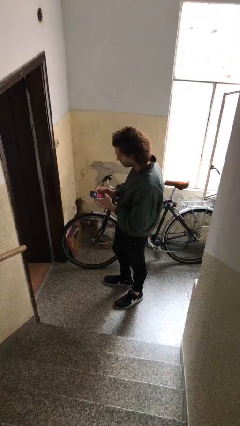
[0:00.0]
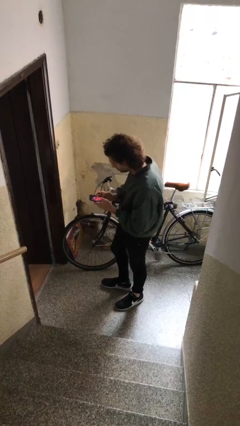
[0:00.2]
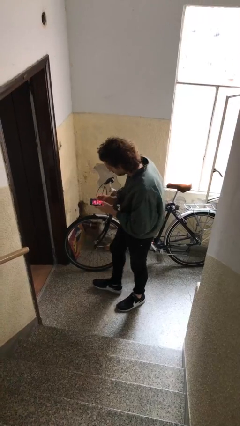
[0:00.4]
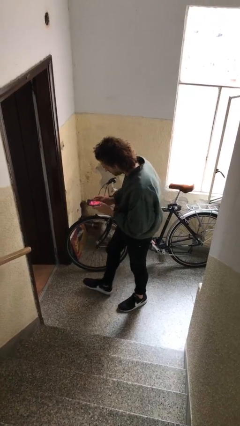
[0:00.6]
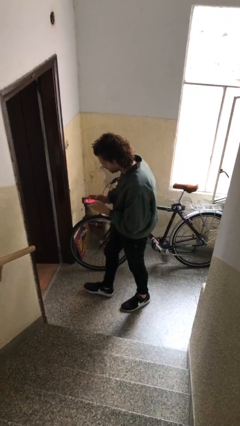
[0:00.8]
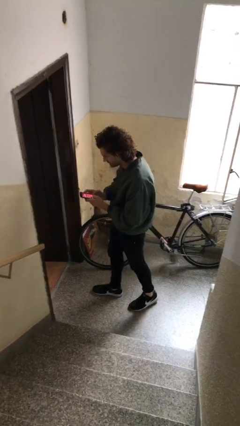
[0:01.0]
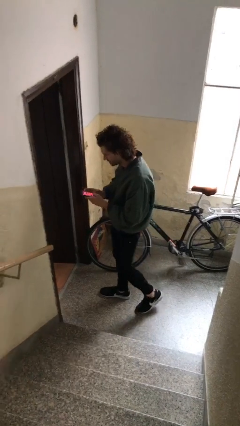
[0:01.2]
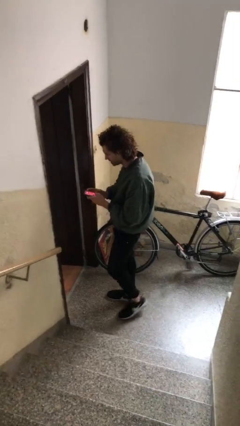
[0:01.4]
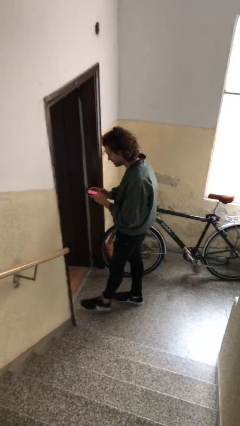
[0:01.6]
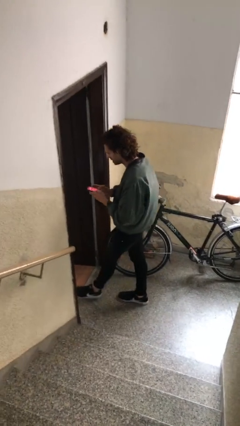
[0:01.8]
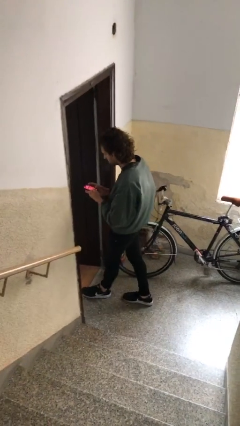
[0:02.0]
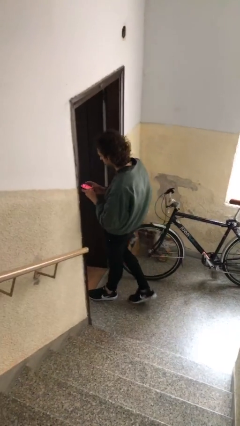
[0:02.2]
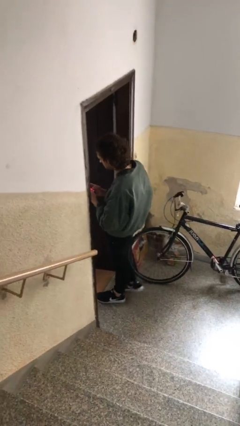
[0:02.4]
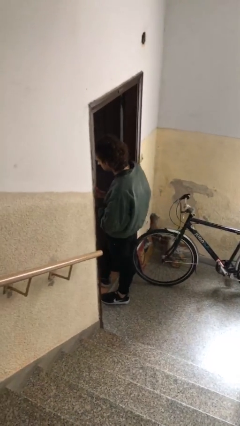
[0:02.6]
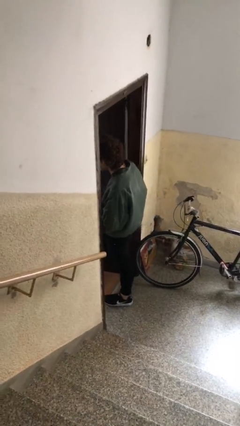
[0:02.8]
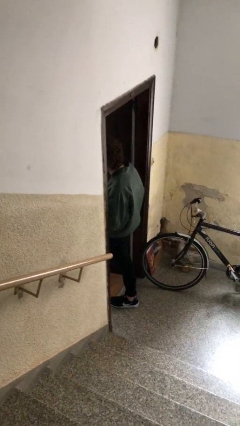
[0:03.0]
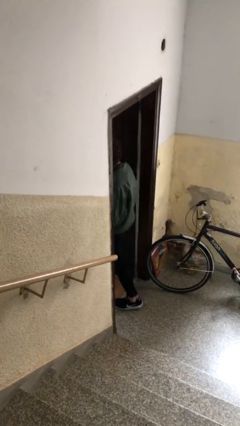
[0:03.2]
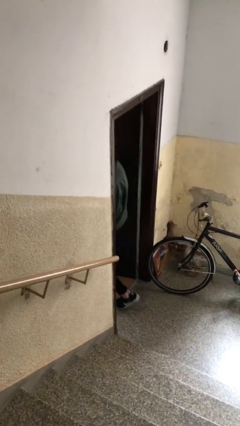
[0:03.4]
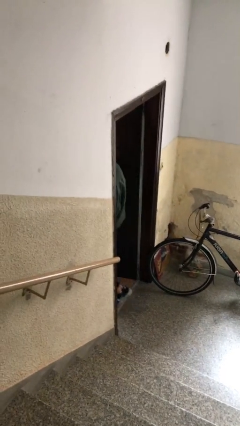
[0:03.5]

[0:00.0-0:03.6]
person texts on phone

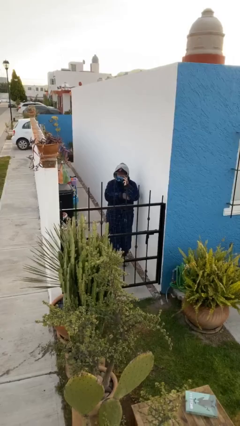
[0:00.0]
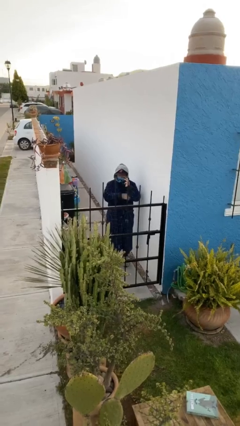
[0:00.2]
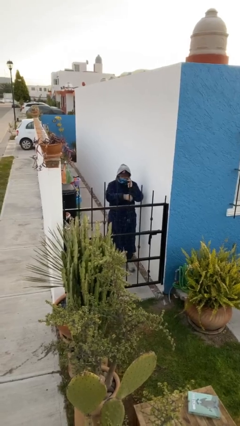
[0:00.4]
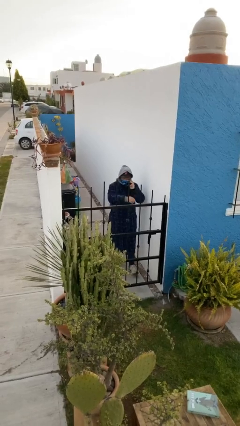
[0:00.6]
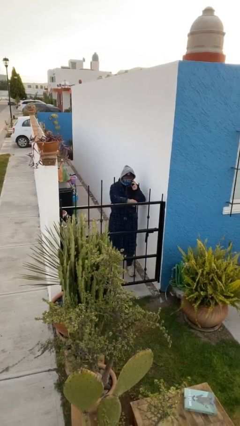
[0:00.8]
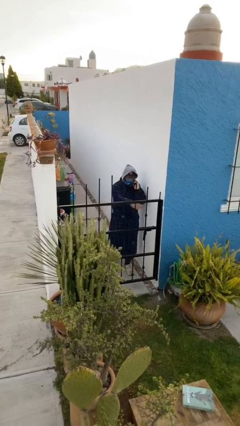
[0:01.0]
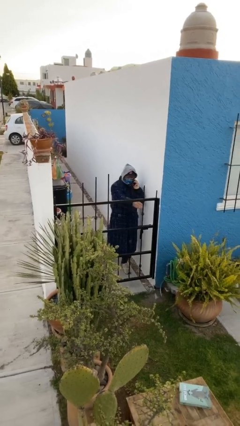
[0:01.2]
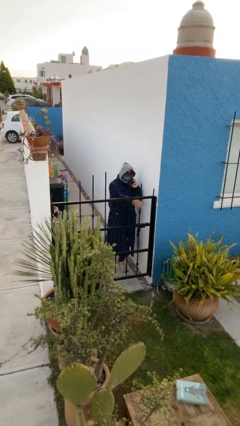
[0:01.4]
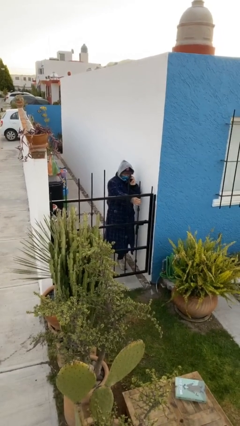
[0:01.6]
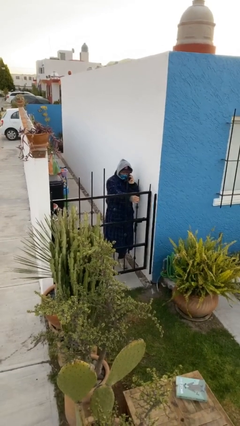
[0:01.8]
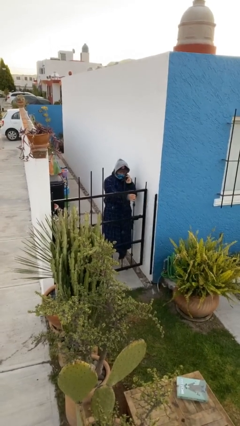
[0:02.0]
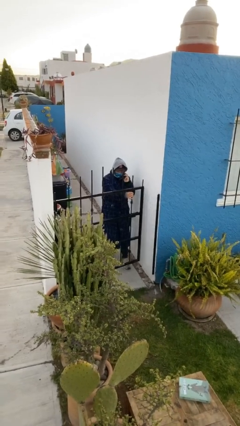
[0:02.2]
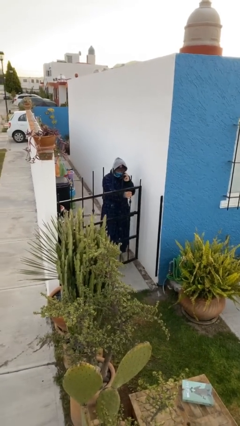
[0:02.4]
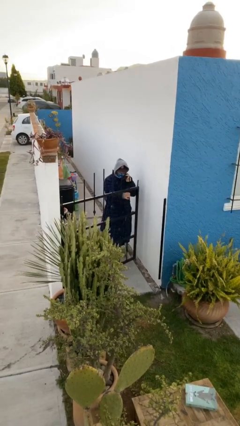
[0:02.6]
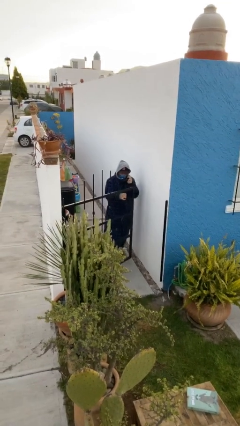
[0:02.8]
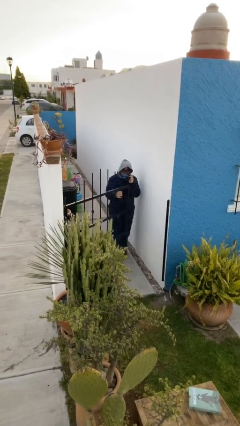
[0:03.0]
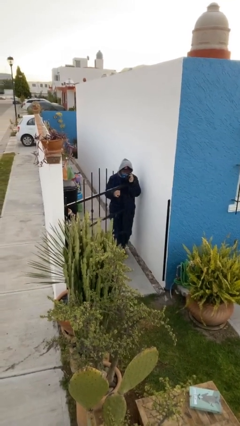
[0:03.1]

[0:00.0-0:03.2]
person opens facility door

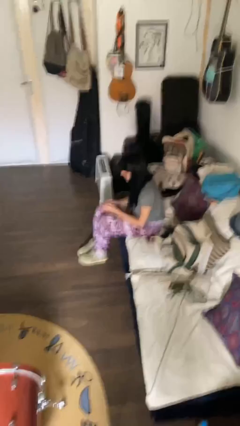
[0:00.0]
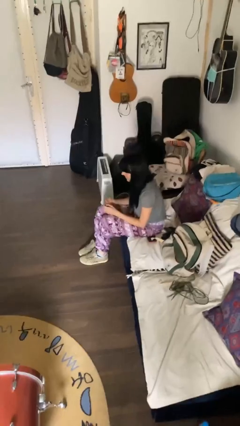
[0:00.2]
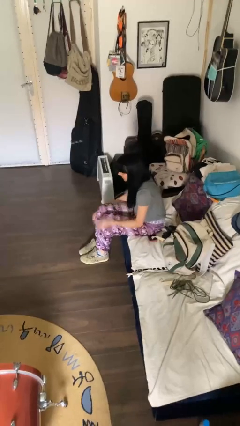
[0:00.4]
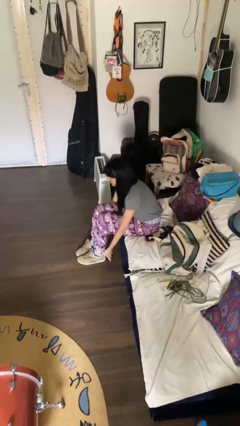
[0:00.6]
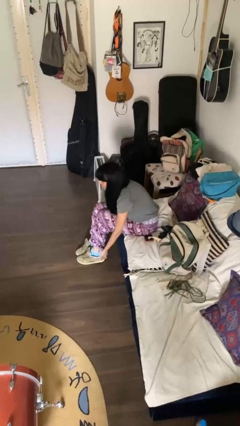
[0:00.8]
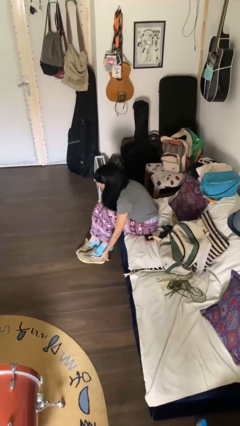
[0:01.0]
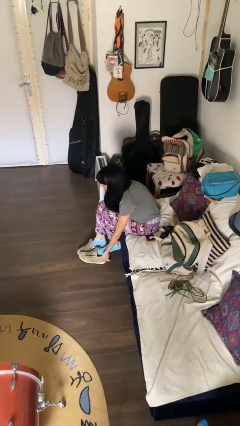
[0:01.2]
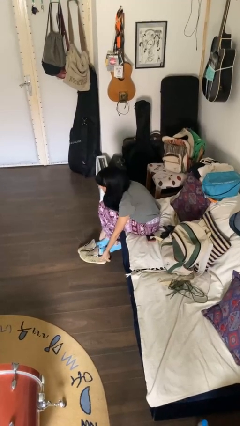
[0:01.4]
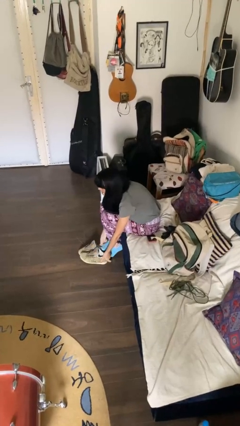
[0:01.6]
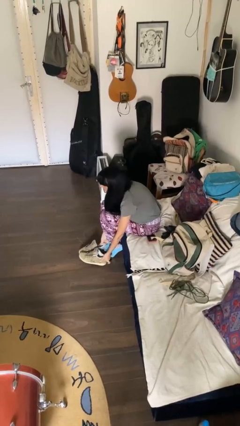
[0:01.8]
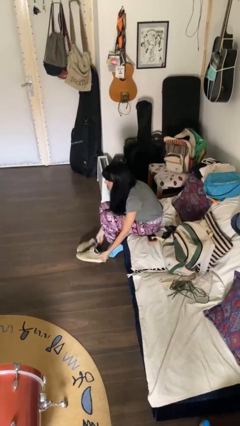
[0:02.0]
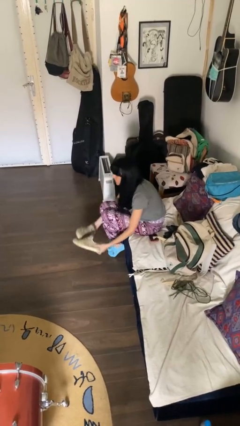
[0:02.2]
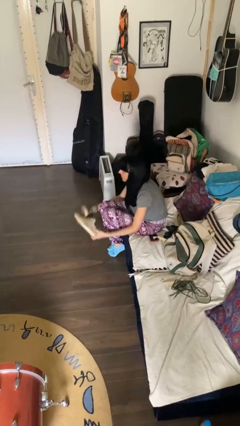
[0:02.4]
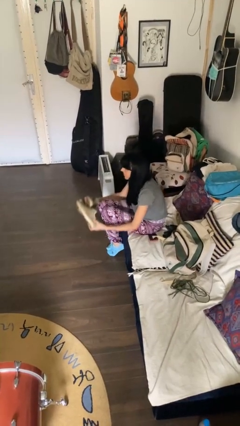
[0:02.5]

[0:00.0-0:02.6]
person takes off shoes

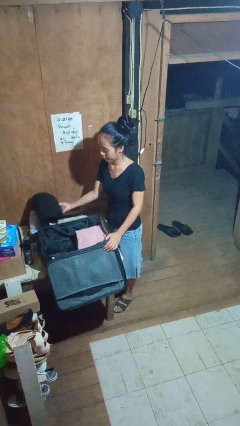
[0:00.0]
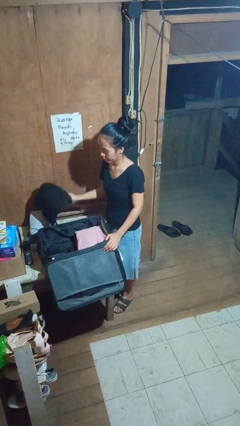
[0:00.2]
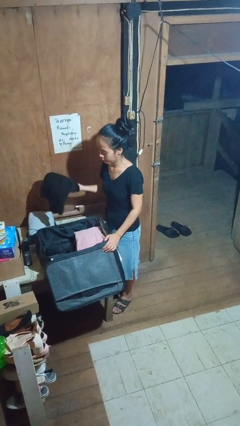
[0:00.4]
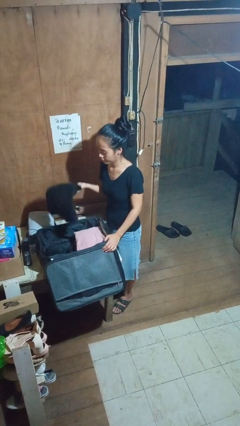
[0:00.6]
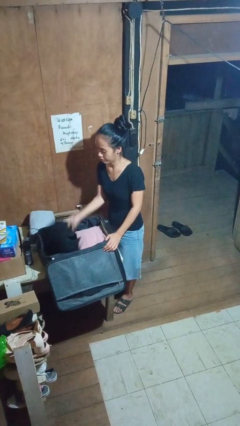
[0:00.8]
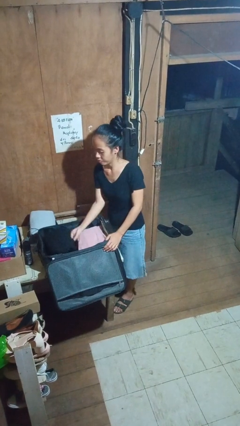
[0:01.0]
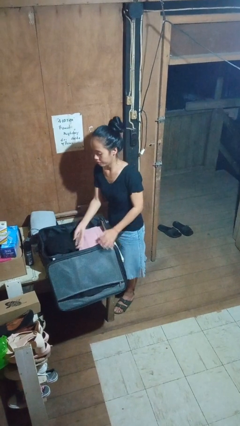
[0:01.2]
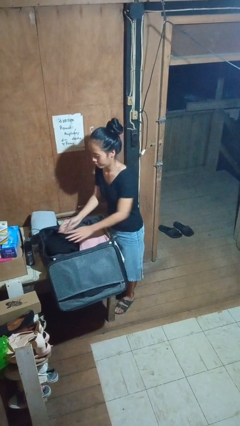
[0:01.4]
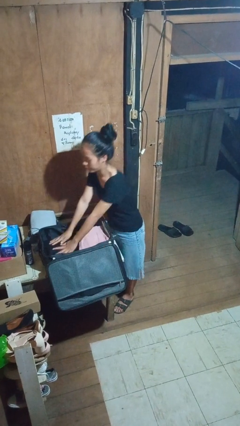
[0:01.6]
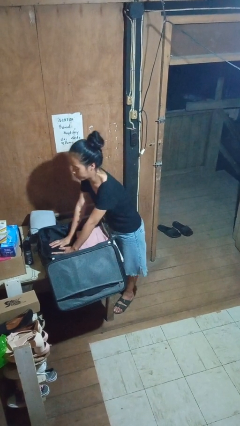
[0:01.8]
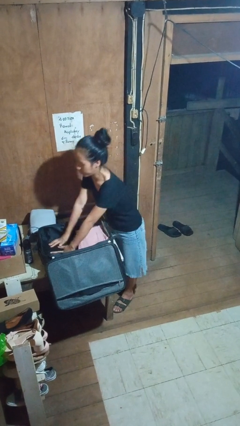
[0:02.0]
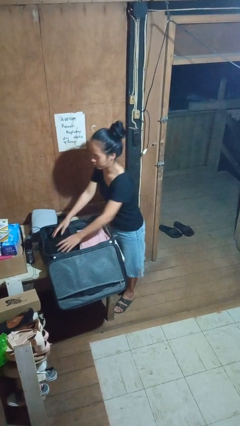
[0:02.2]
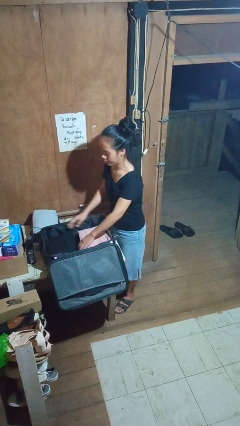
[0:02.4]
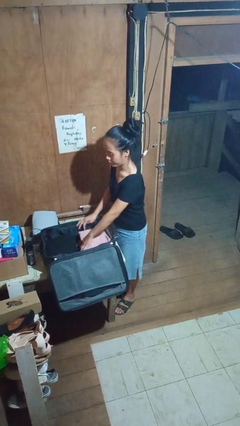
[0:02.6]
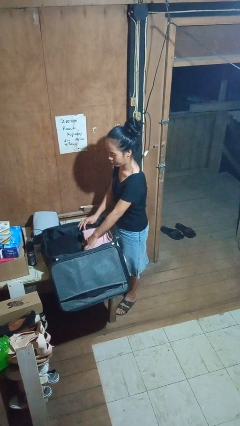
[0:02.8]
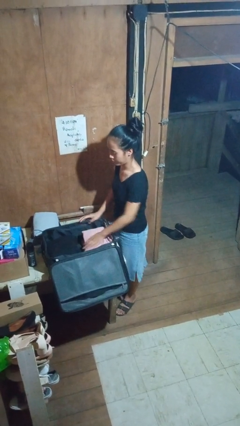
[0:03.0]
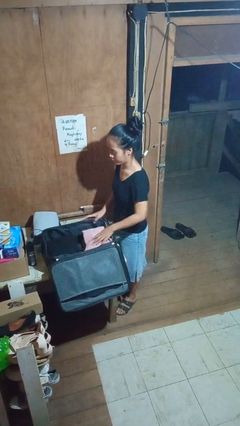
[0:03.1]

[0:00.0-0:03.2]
person loads clothes into suitcase

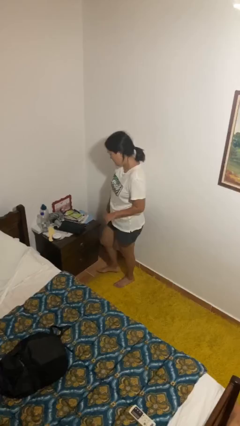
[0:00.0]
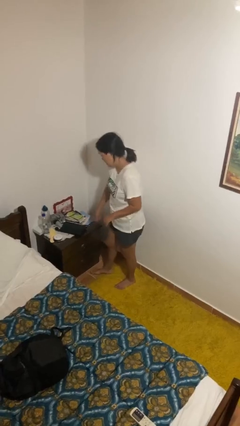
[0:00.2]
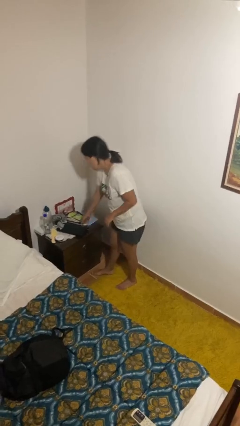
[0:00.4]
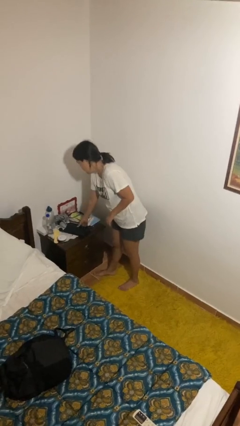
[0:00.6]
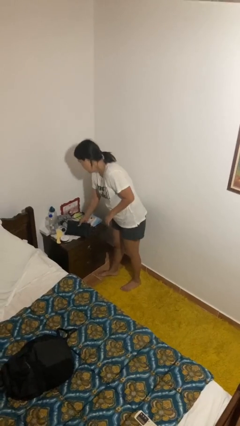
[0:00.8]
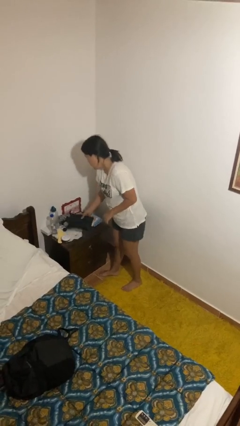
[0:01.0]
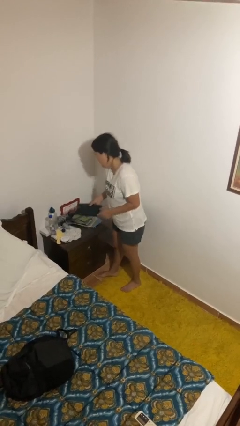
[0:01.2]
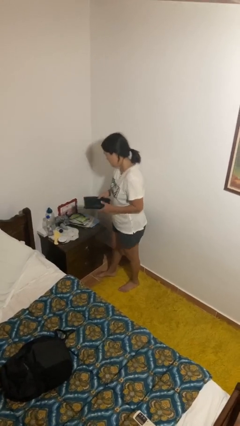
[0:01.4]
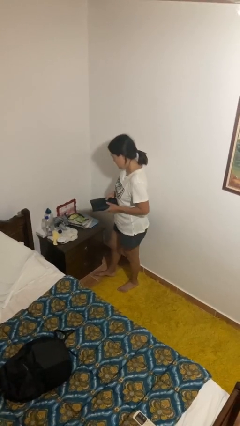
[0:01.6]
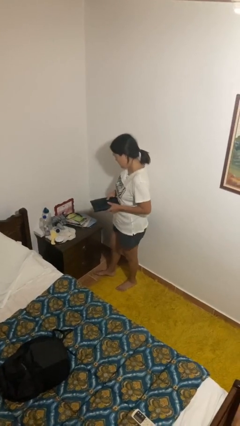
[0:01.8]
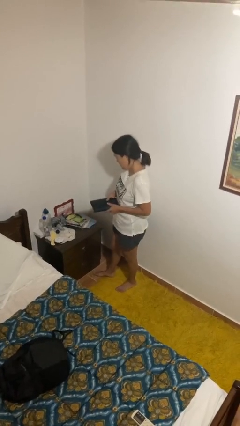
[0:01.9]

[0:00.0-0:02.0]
person picks up object from countertop

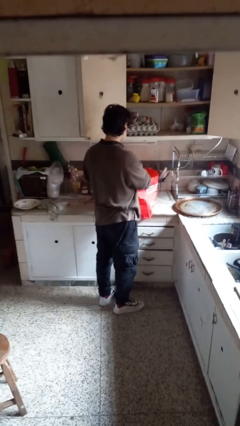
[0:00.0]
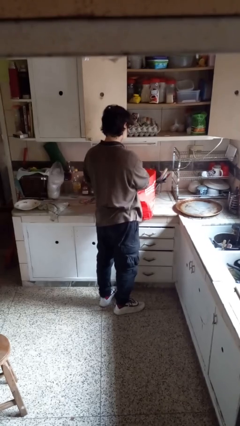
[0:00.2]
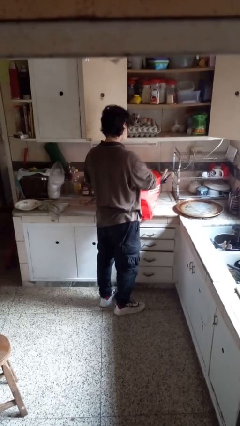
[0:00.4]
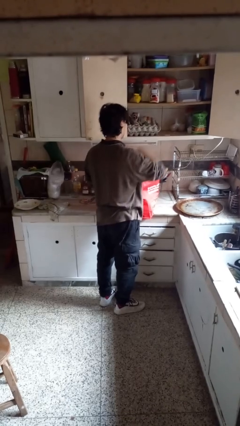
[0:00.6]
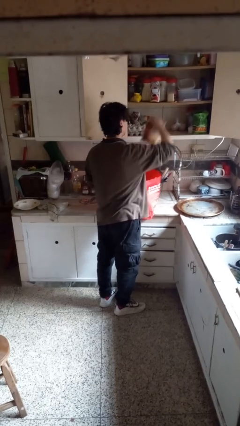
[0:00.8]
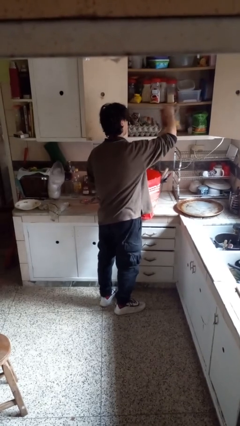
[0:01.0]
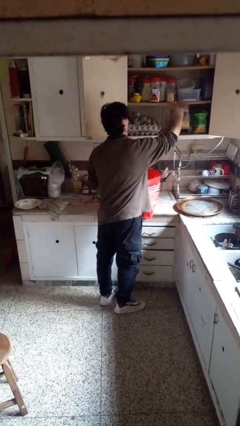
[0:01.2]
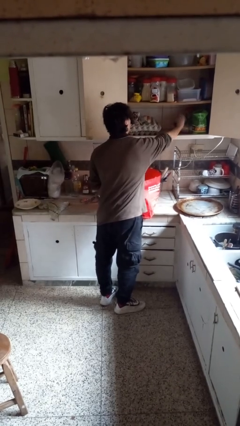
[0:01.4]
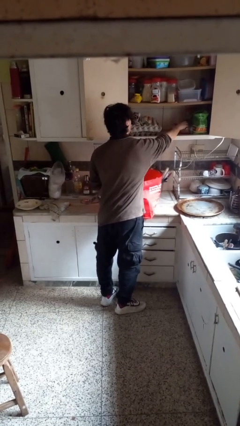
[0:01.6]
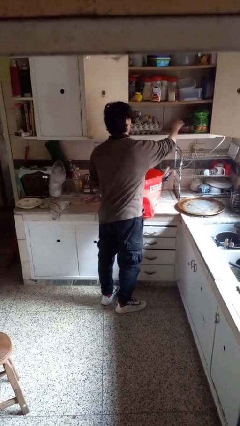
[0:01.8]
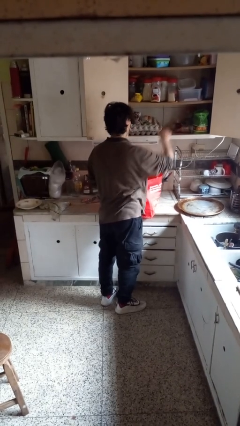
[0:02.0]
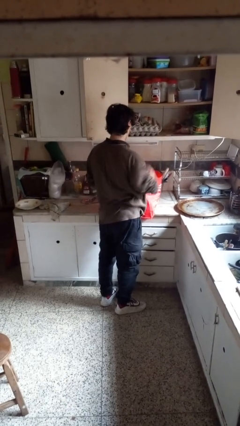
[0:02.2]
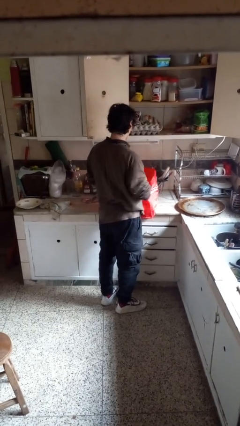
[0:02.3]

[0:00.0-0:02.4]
person loads groceries into cabinet

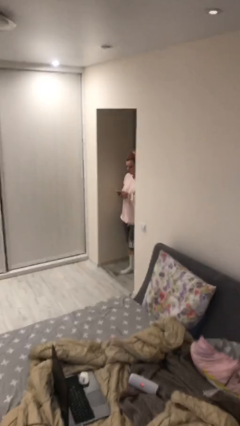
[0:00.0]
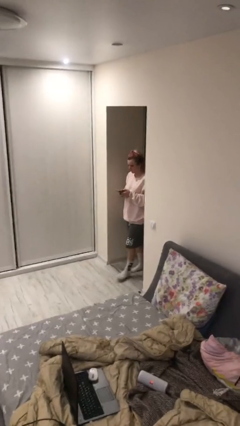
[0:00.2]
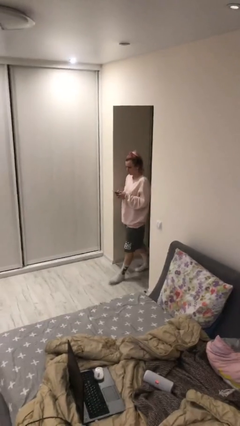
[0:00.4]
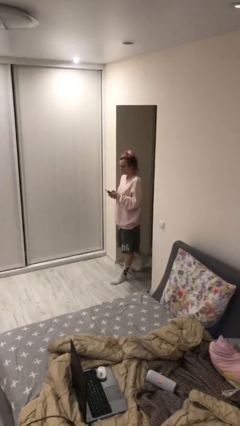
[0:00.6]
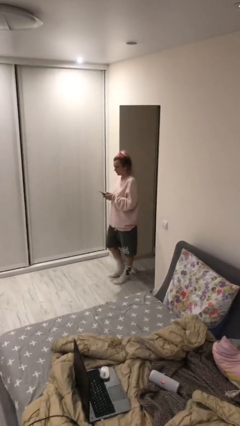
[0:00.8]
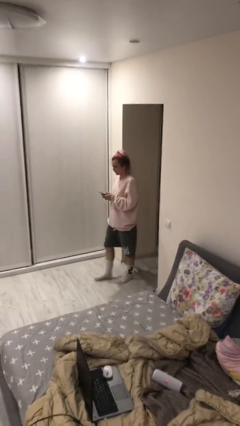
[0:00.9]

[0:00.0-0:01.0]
person enters scene through structure
